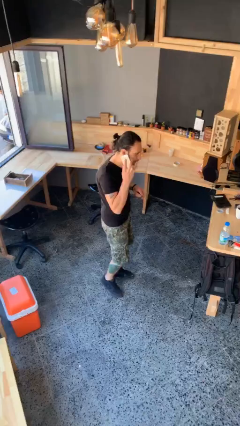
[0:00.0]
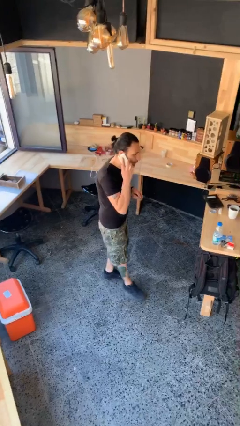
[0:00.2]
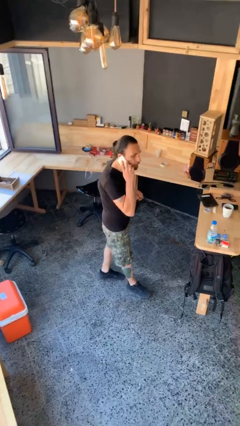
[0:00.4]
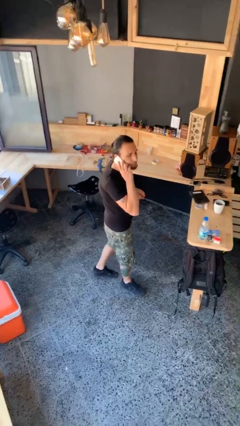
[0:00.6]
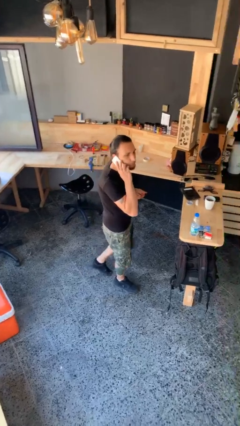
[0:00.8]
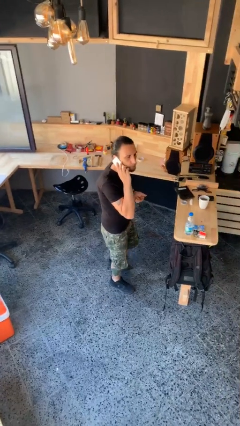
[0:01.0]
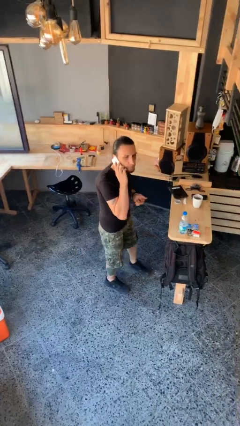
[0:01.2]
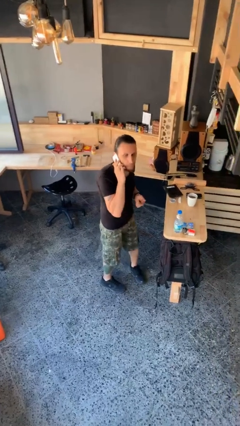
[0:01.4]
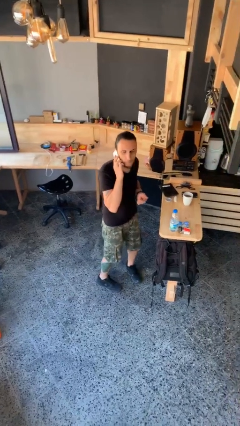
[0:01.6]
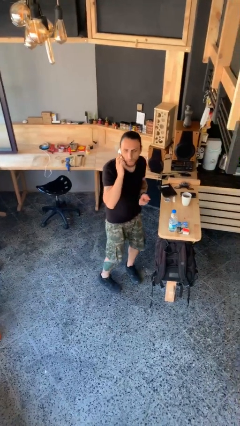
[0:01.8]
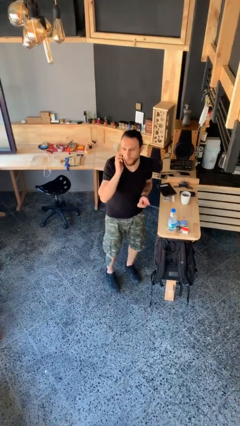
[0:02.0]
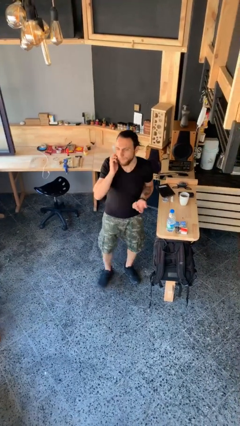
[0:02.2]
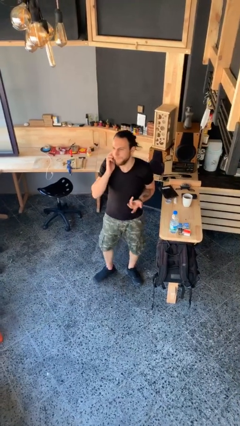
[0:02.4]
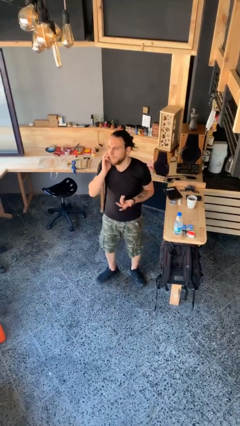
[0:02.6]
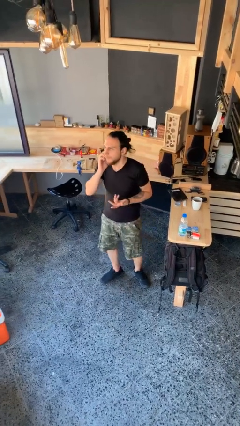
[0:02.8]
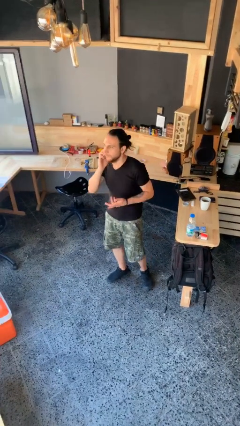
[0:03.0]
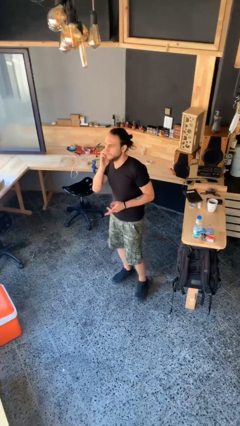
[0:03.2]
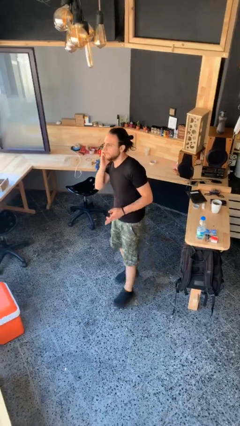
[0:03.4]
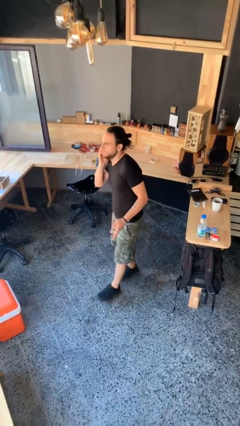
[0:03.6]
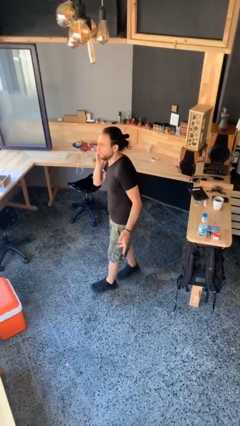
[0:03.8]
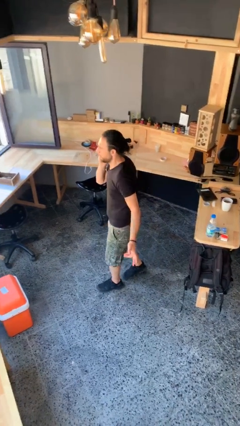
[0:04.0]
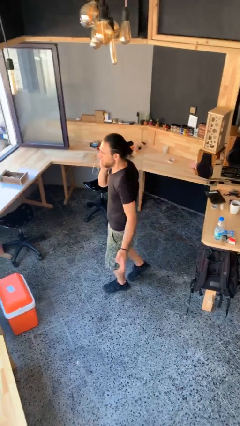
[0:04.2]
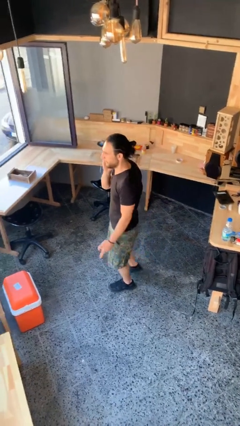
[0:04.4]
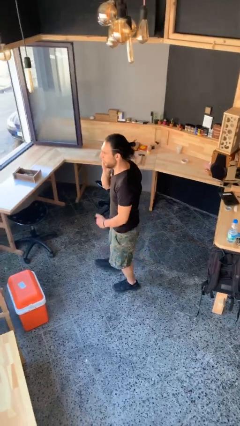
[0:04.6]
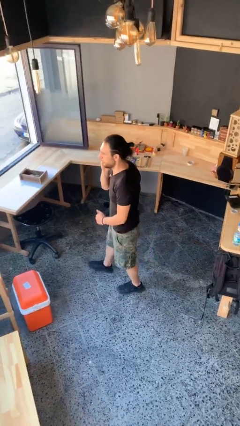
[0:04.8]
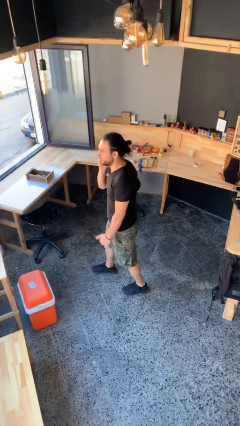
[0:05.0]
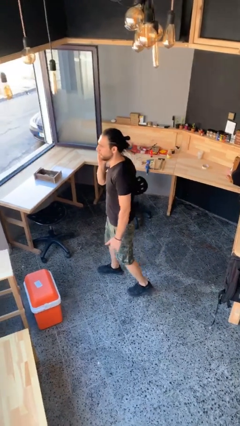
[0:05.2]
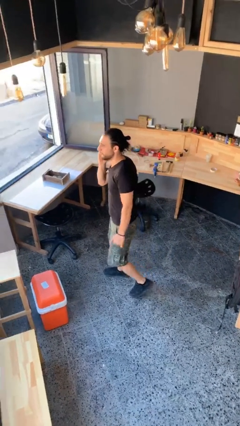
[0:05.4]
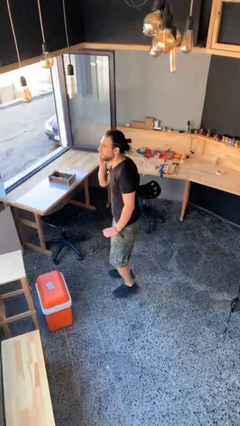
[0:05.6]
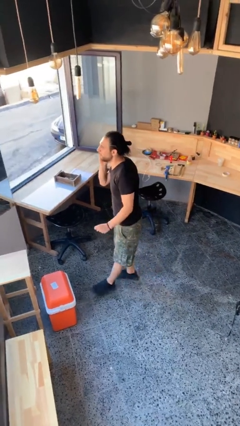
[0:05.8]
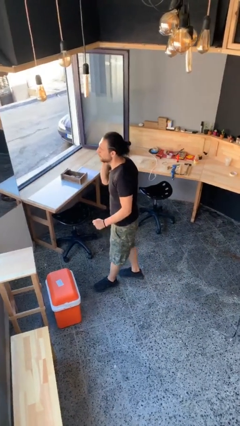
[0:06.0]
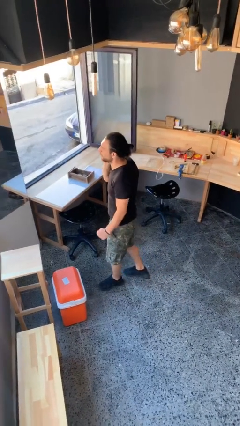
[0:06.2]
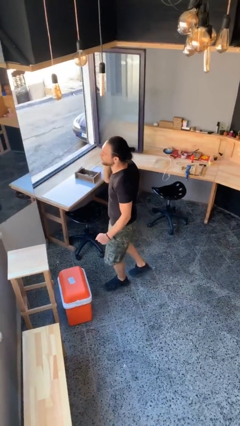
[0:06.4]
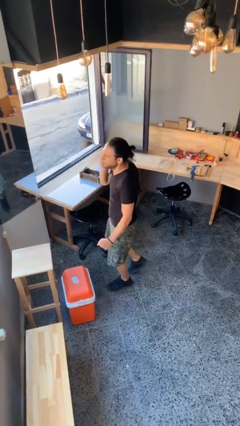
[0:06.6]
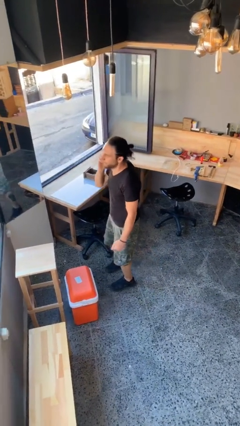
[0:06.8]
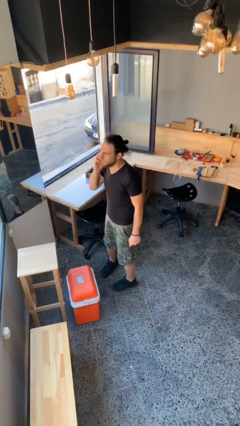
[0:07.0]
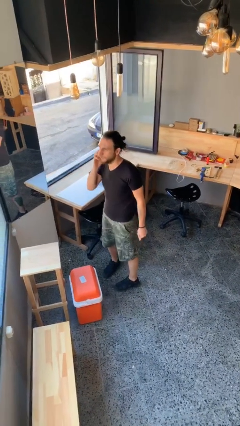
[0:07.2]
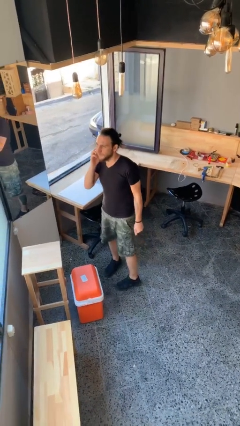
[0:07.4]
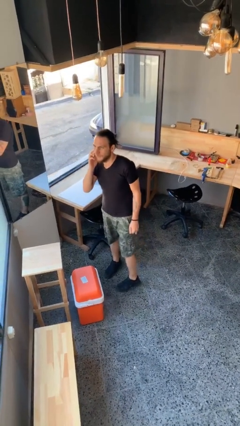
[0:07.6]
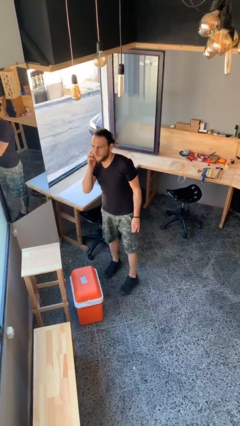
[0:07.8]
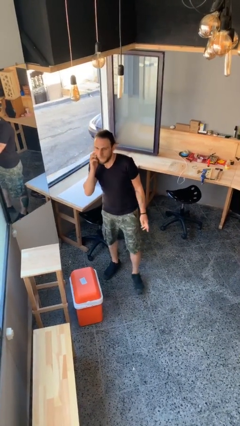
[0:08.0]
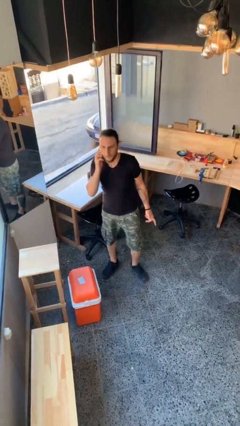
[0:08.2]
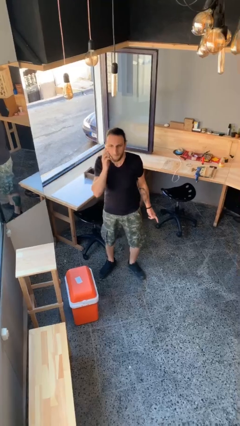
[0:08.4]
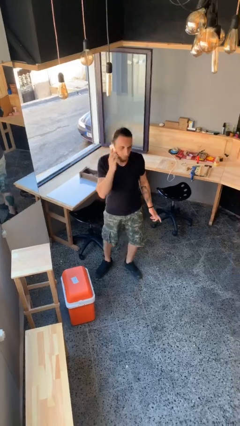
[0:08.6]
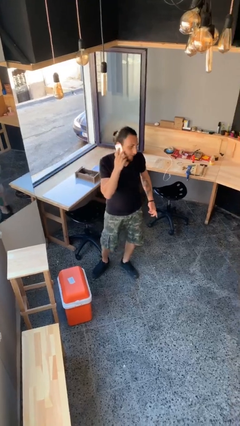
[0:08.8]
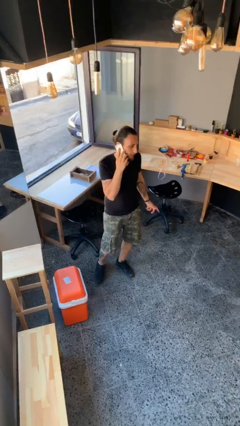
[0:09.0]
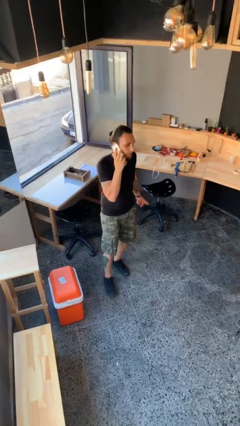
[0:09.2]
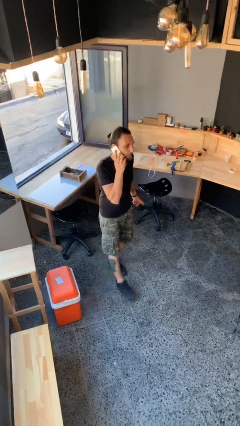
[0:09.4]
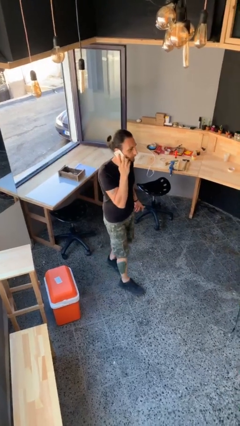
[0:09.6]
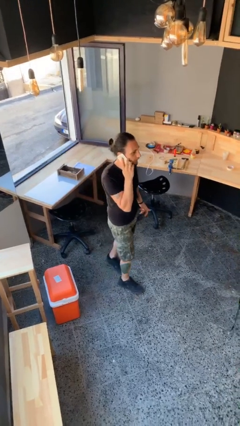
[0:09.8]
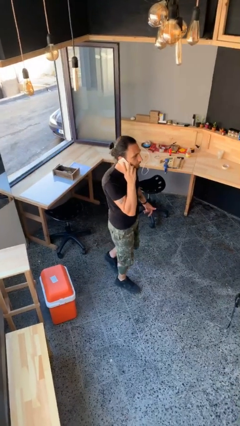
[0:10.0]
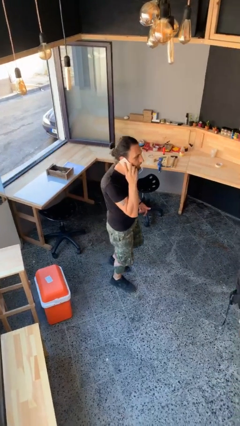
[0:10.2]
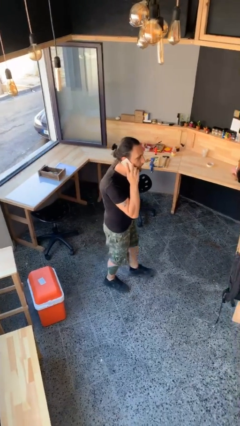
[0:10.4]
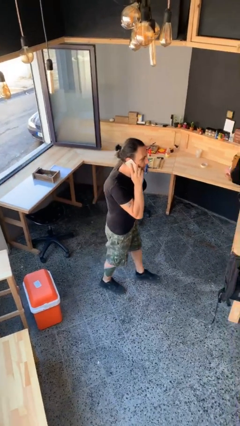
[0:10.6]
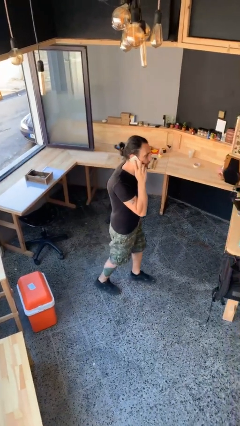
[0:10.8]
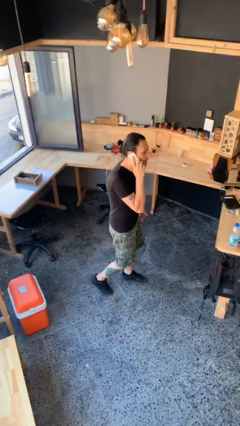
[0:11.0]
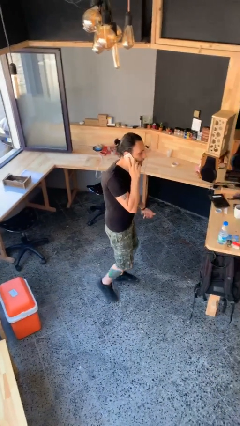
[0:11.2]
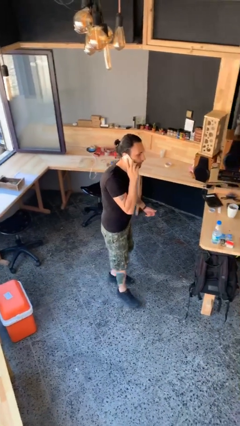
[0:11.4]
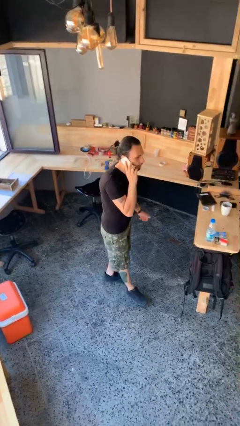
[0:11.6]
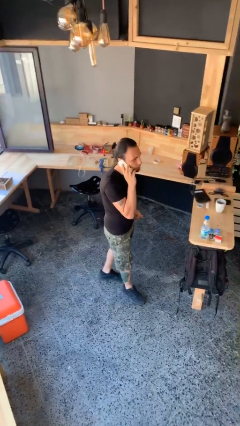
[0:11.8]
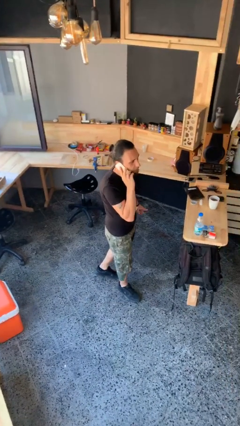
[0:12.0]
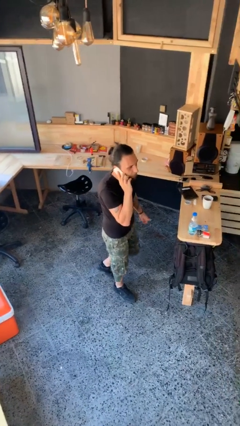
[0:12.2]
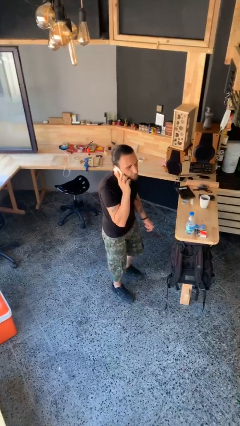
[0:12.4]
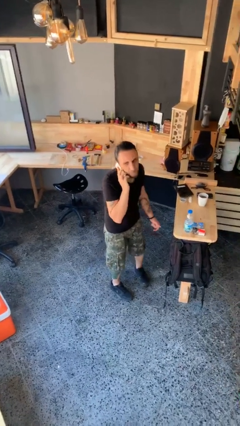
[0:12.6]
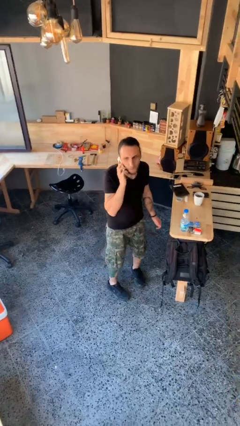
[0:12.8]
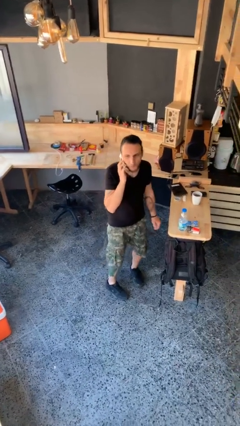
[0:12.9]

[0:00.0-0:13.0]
person talks on phone

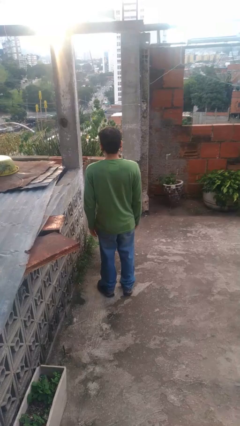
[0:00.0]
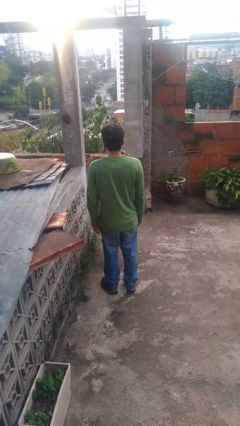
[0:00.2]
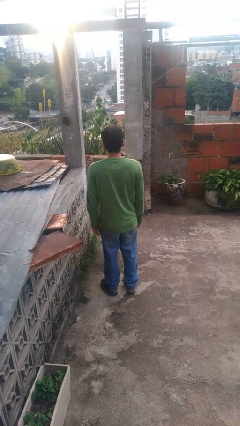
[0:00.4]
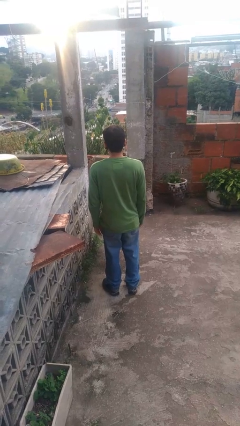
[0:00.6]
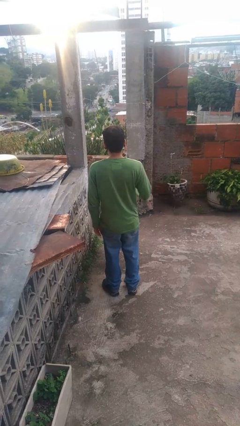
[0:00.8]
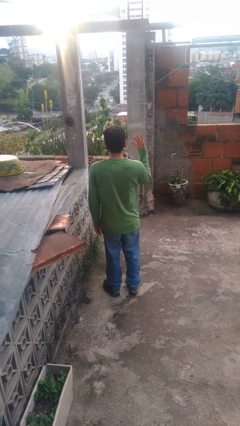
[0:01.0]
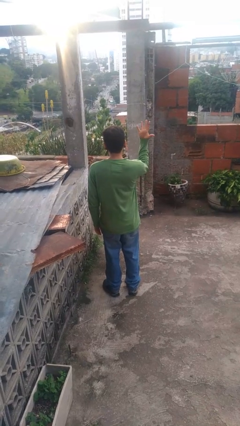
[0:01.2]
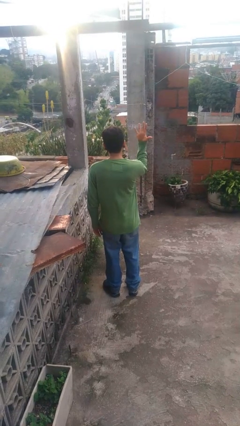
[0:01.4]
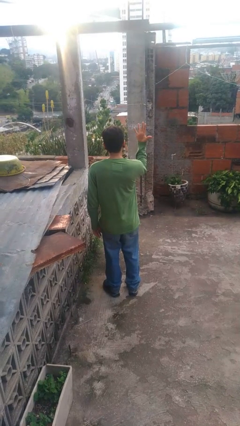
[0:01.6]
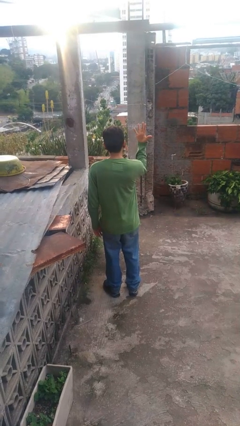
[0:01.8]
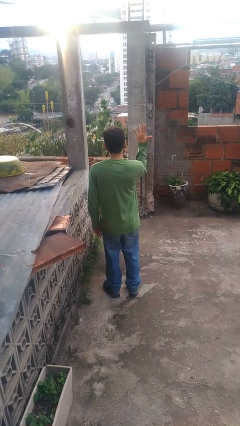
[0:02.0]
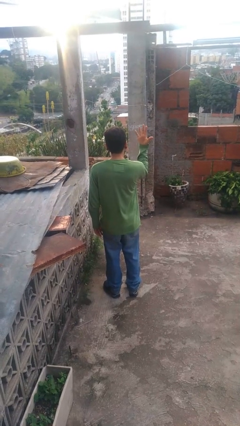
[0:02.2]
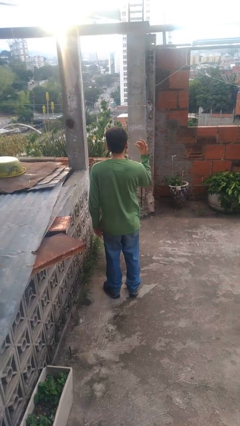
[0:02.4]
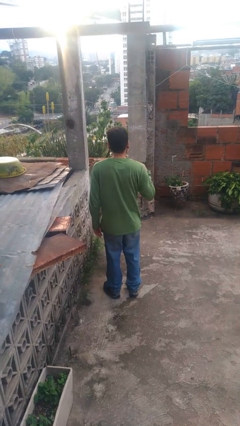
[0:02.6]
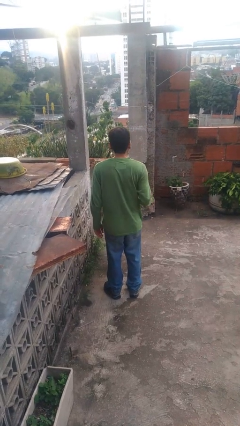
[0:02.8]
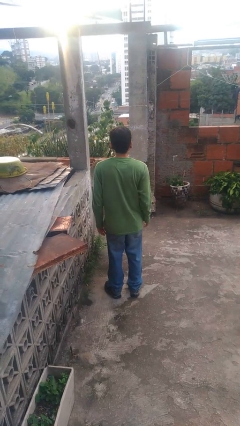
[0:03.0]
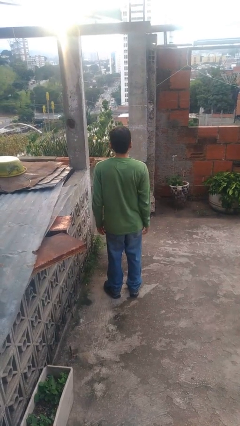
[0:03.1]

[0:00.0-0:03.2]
person gestures number five

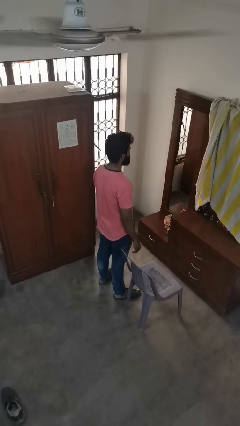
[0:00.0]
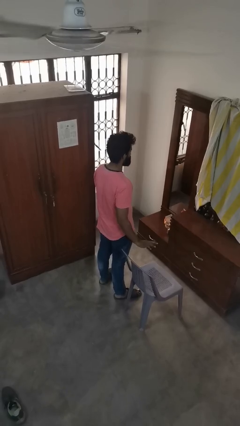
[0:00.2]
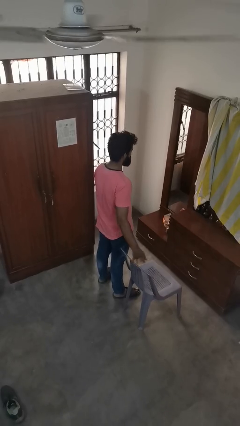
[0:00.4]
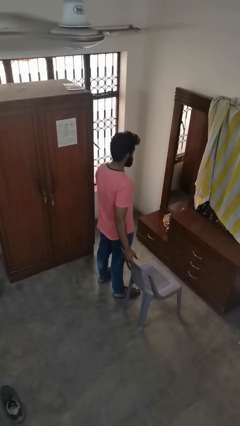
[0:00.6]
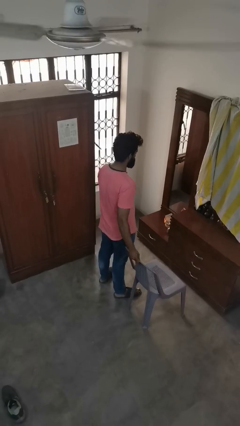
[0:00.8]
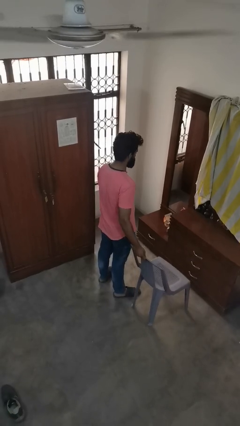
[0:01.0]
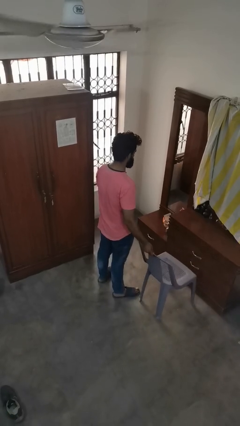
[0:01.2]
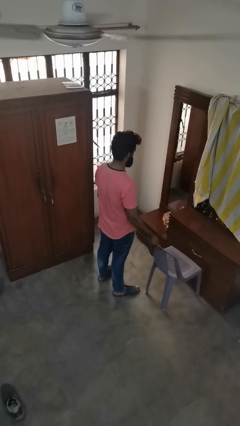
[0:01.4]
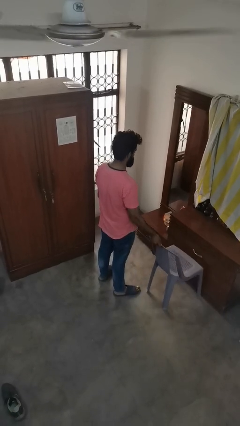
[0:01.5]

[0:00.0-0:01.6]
person pushes in chair

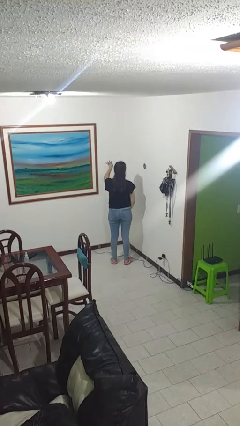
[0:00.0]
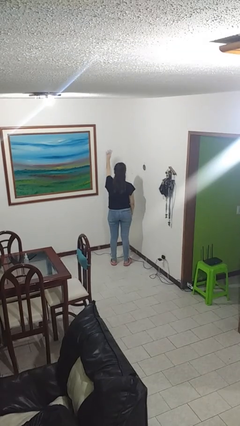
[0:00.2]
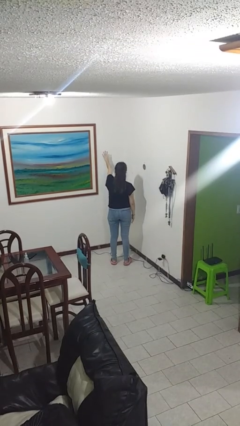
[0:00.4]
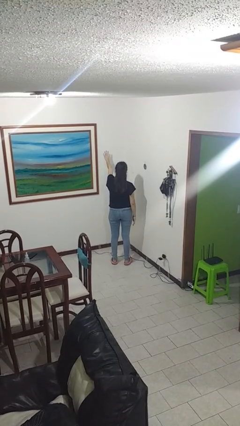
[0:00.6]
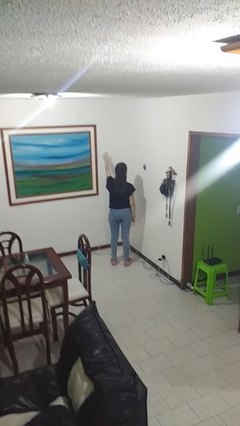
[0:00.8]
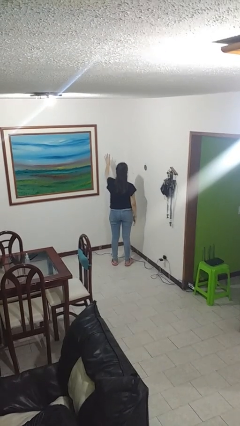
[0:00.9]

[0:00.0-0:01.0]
person gestures number four
